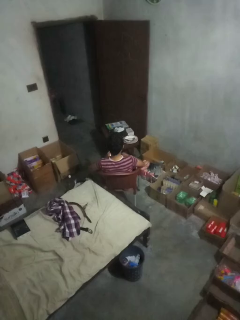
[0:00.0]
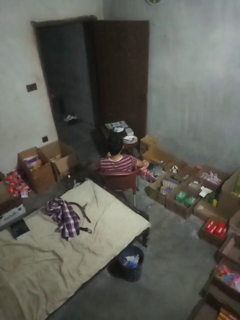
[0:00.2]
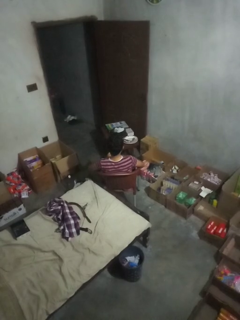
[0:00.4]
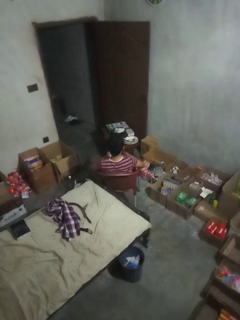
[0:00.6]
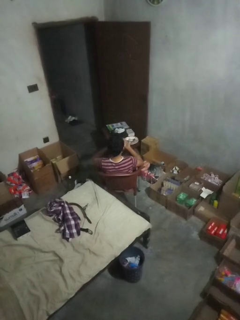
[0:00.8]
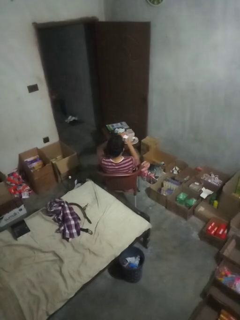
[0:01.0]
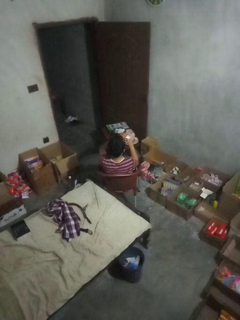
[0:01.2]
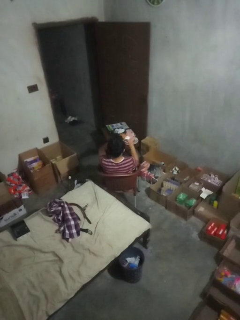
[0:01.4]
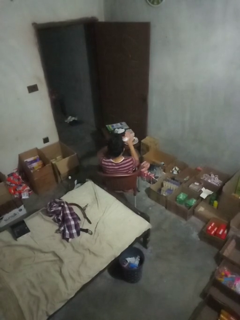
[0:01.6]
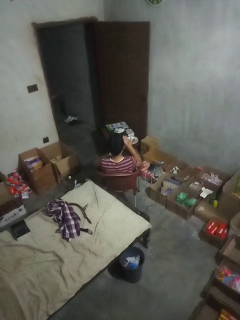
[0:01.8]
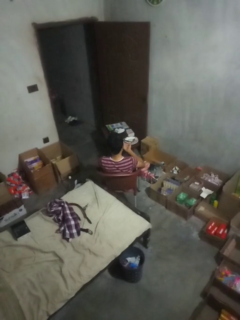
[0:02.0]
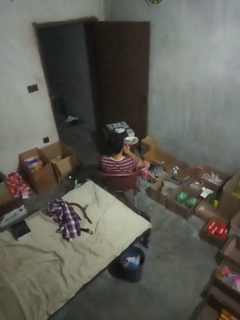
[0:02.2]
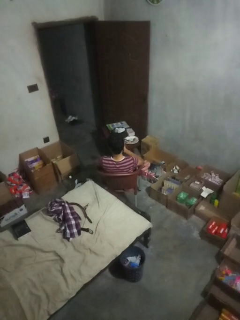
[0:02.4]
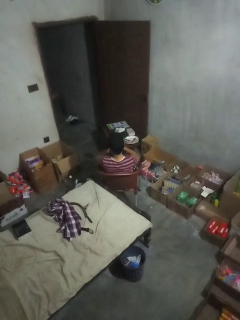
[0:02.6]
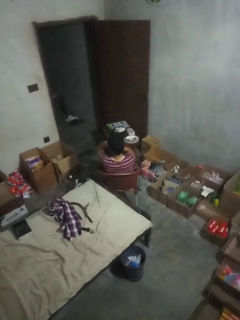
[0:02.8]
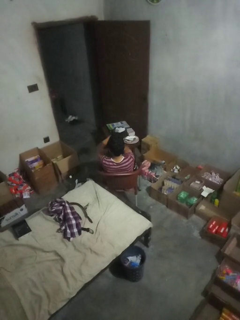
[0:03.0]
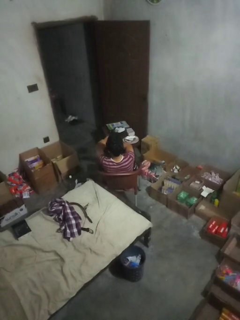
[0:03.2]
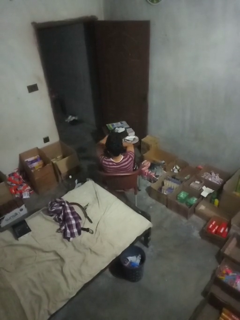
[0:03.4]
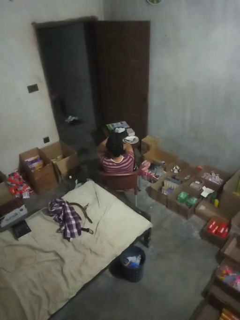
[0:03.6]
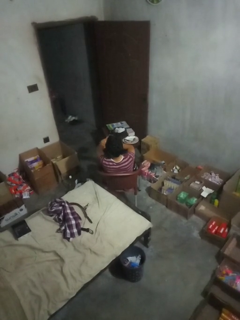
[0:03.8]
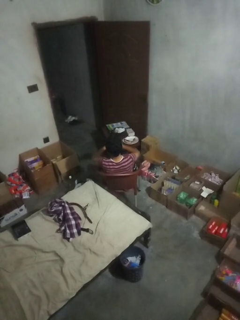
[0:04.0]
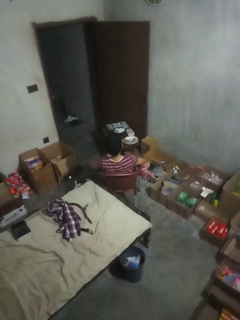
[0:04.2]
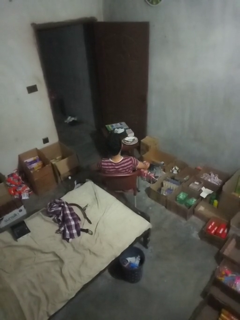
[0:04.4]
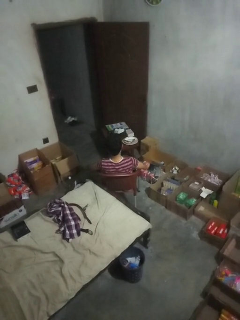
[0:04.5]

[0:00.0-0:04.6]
person applies sunscreen

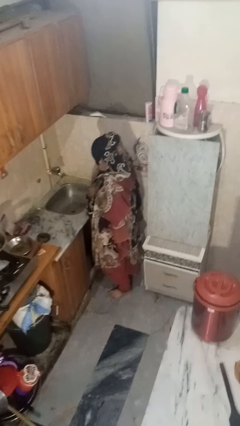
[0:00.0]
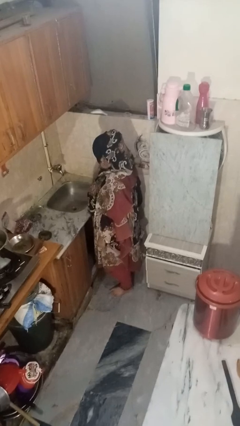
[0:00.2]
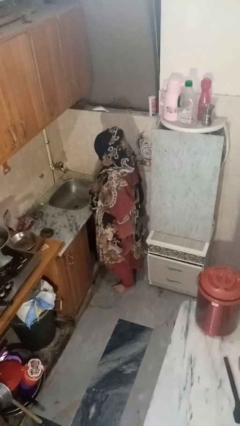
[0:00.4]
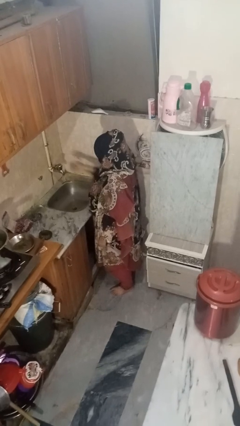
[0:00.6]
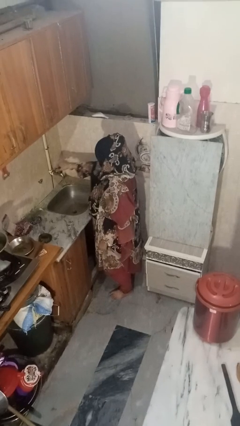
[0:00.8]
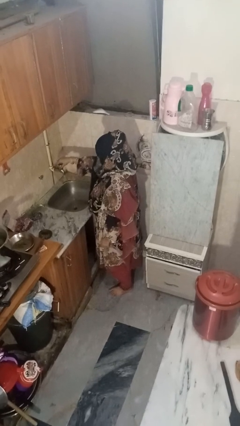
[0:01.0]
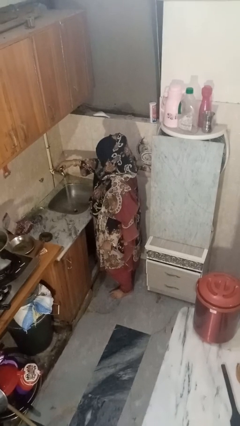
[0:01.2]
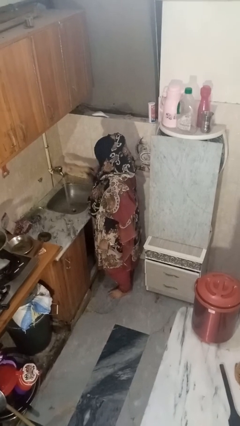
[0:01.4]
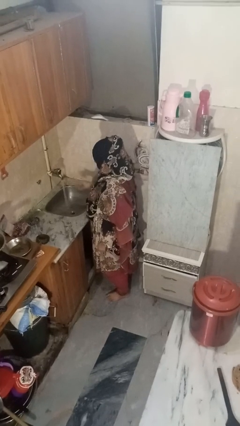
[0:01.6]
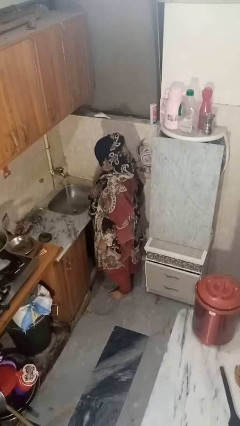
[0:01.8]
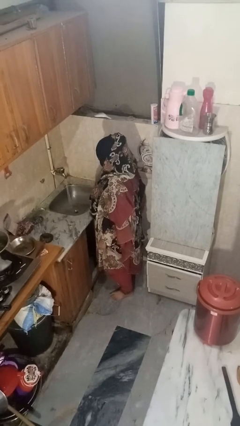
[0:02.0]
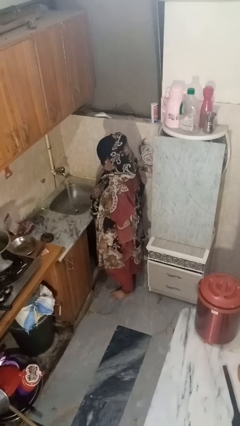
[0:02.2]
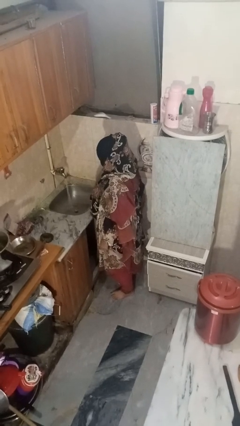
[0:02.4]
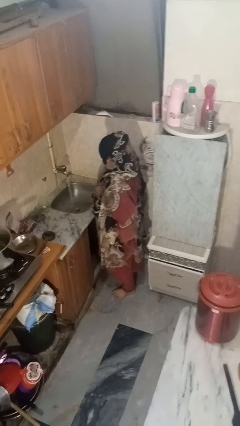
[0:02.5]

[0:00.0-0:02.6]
person turns on faucet

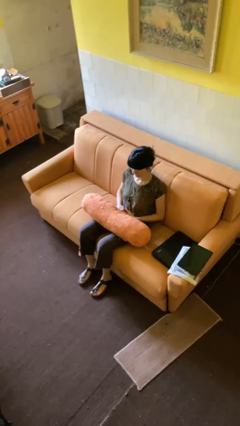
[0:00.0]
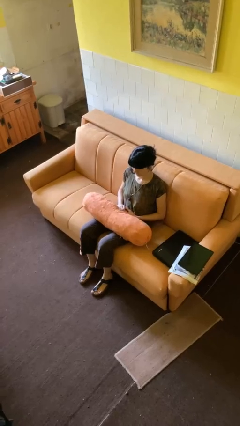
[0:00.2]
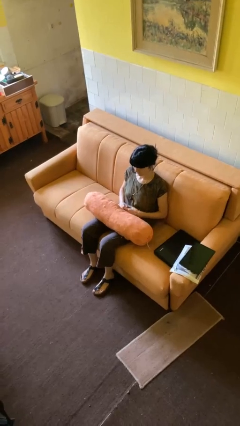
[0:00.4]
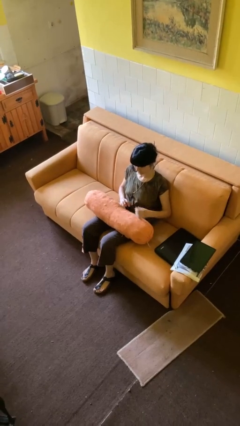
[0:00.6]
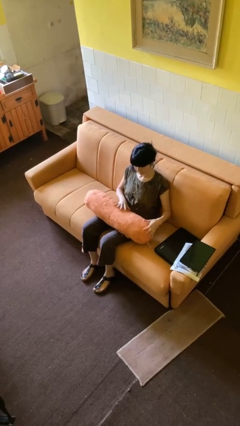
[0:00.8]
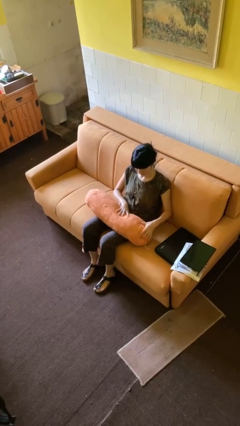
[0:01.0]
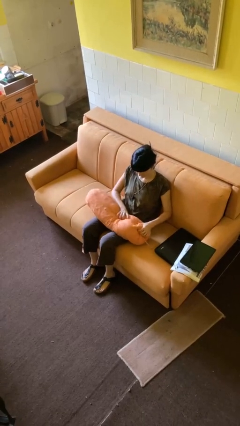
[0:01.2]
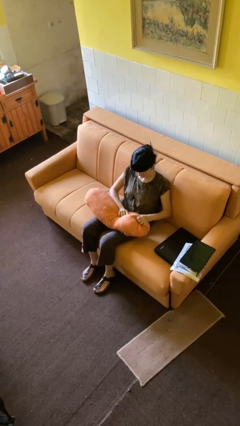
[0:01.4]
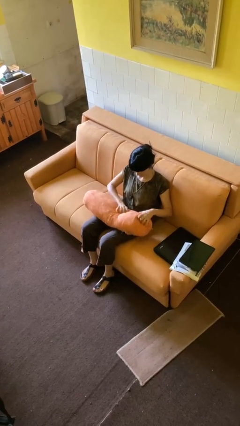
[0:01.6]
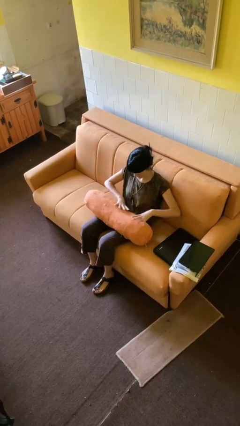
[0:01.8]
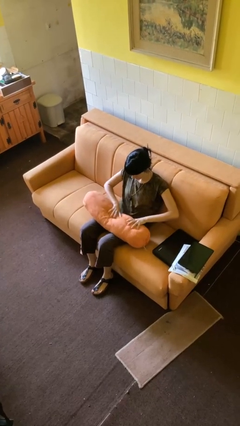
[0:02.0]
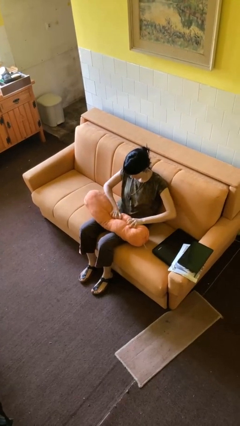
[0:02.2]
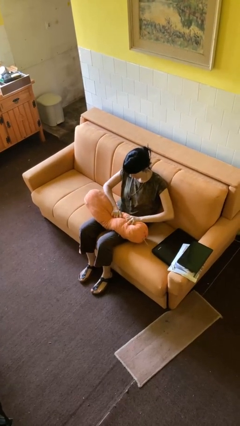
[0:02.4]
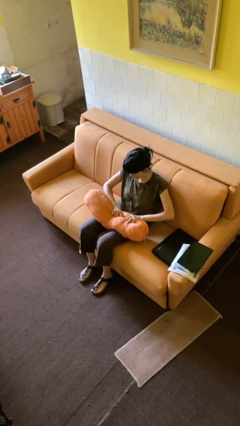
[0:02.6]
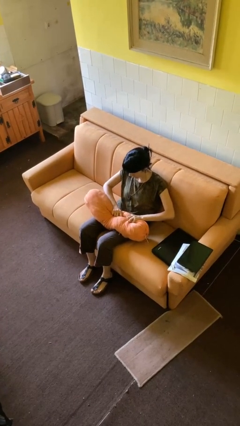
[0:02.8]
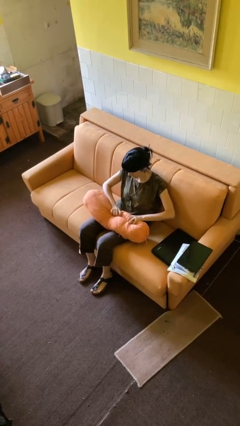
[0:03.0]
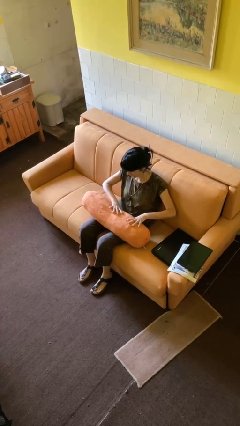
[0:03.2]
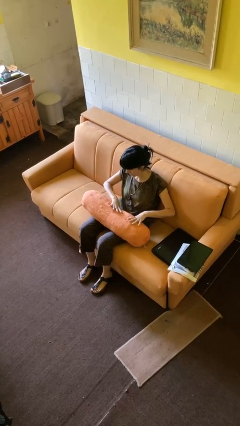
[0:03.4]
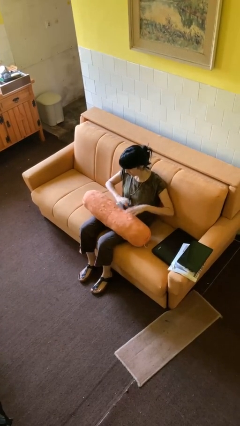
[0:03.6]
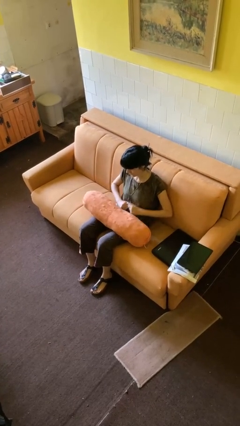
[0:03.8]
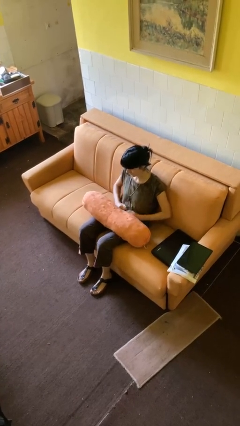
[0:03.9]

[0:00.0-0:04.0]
person squeezes object

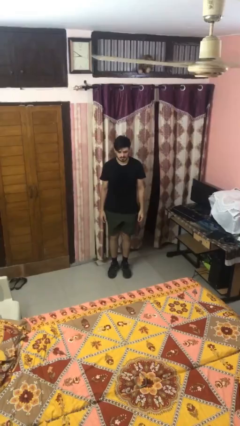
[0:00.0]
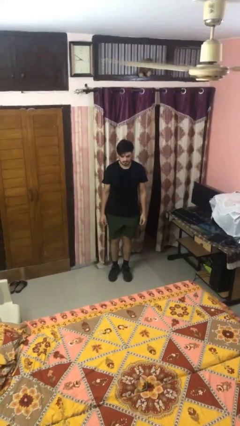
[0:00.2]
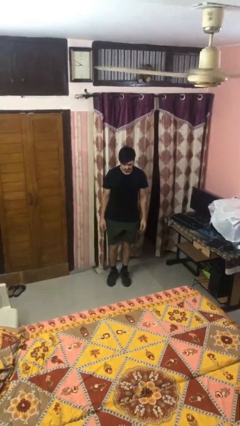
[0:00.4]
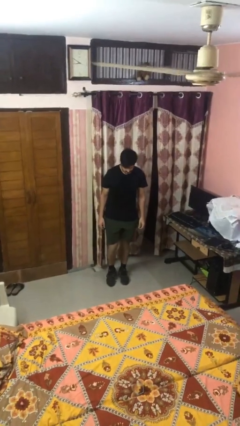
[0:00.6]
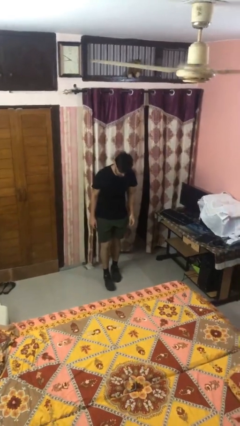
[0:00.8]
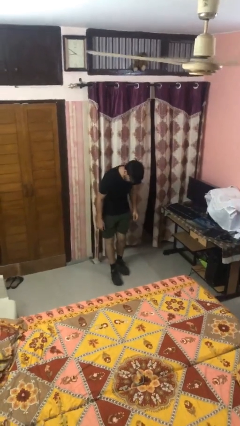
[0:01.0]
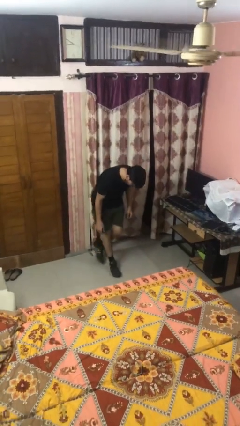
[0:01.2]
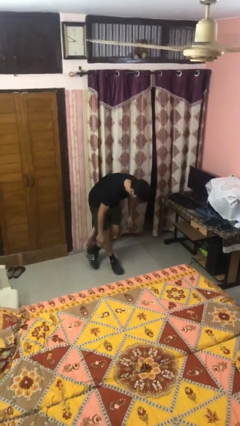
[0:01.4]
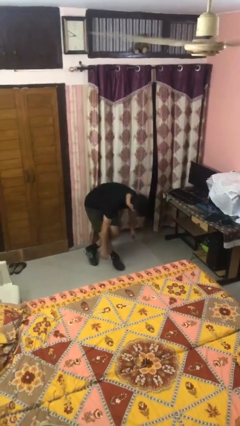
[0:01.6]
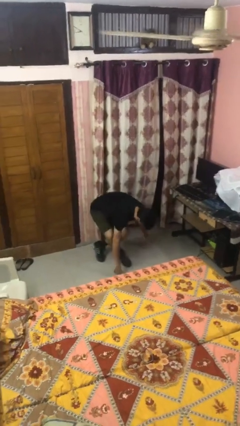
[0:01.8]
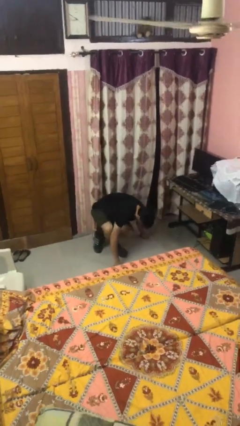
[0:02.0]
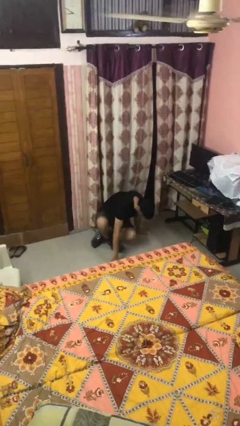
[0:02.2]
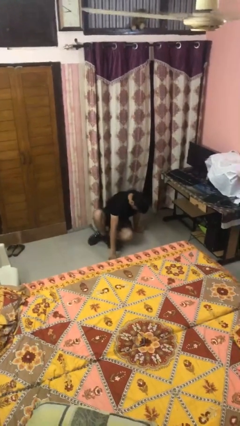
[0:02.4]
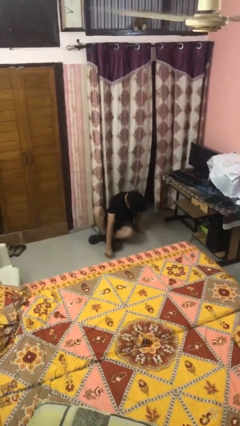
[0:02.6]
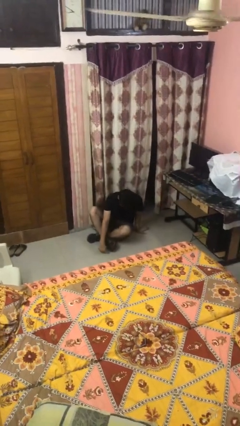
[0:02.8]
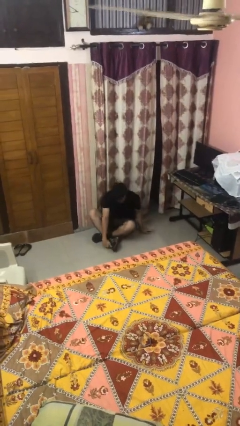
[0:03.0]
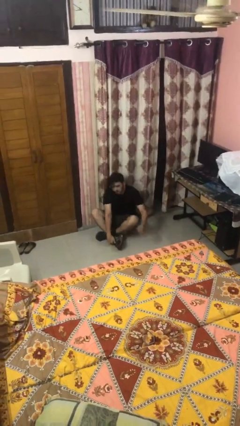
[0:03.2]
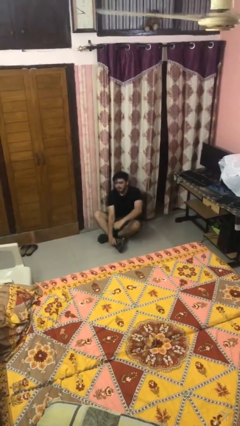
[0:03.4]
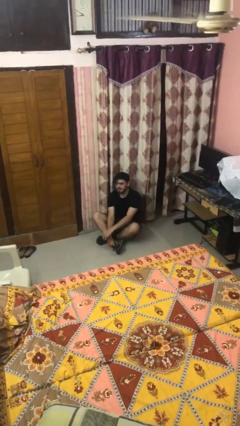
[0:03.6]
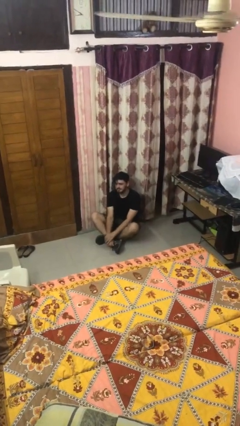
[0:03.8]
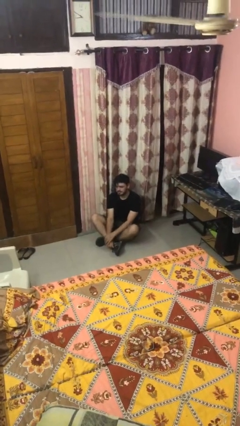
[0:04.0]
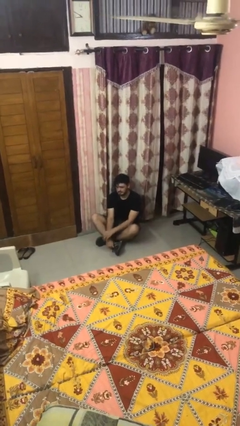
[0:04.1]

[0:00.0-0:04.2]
person sits crisscross

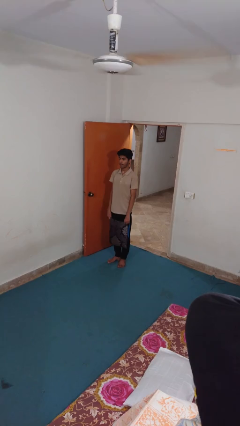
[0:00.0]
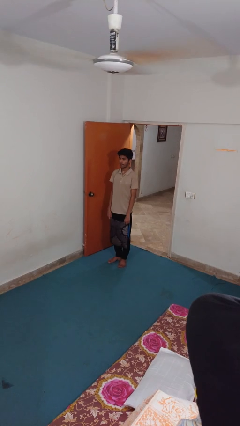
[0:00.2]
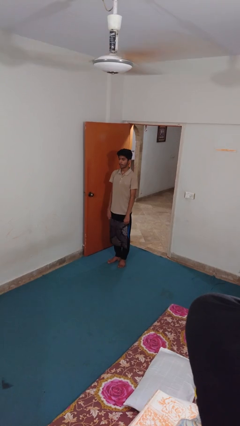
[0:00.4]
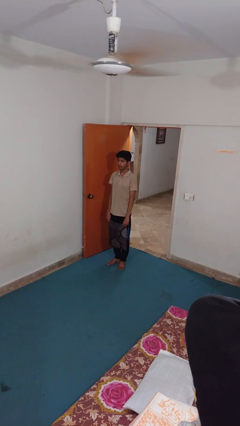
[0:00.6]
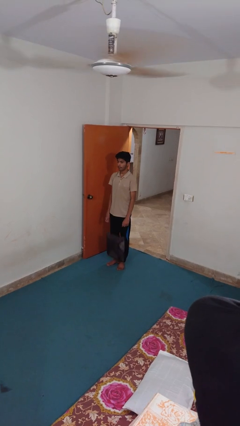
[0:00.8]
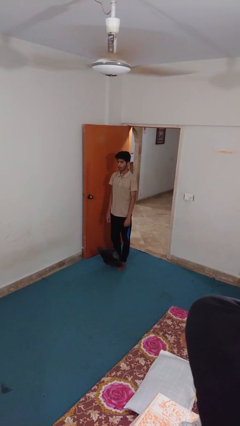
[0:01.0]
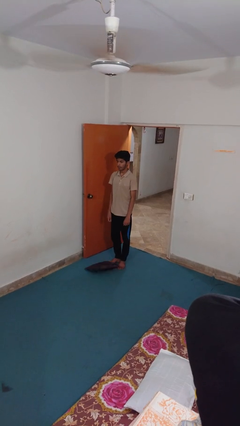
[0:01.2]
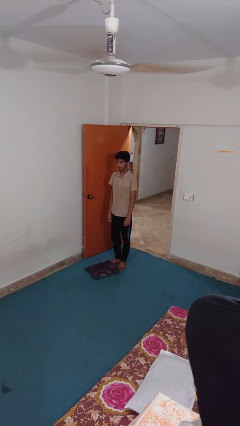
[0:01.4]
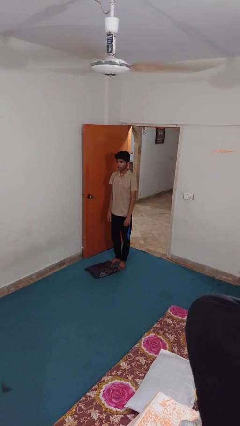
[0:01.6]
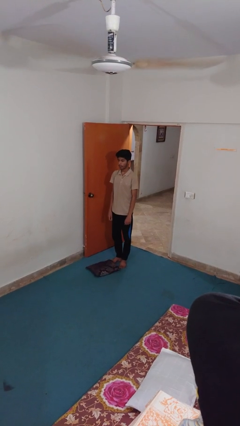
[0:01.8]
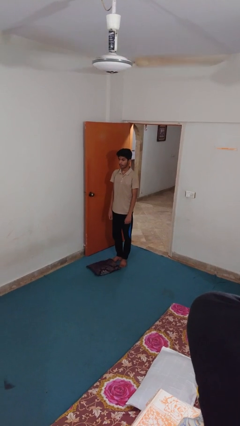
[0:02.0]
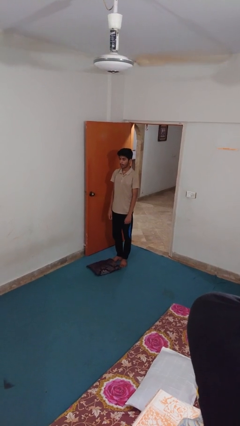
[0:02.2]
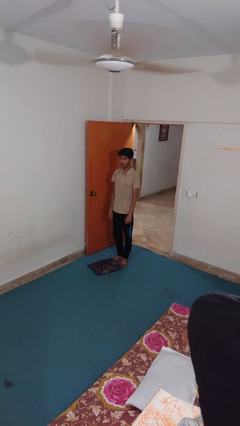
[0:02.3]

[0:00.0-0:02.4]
person drops object

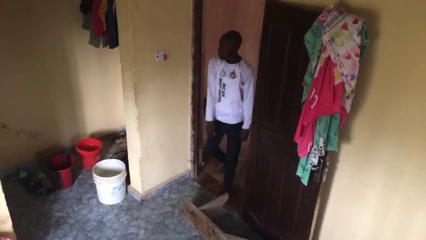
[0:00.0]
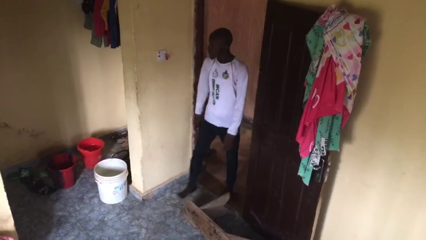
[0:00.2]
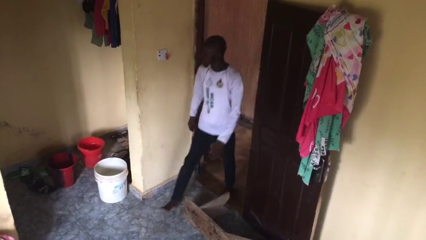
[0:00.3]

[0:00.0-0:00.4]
person stubs toe

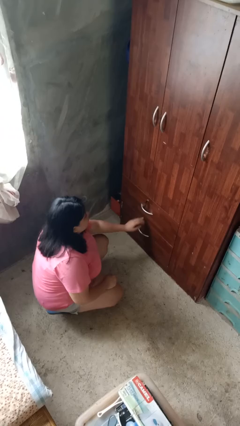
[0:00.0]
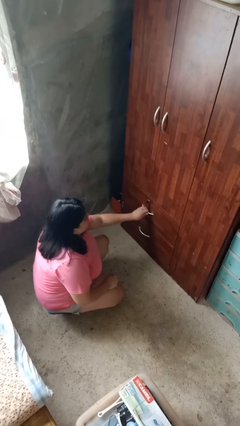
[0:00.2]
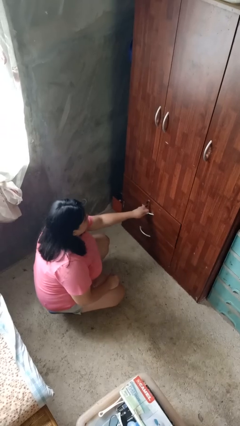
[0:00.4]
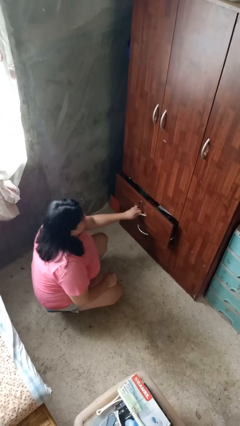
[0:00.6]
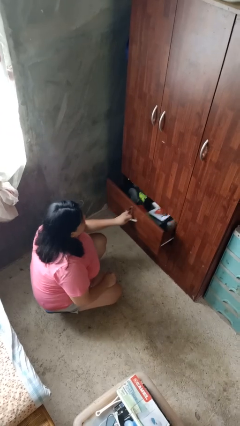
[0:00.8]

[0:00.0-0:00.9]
person opens dresser drawer
